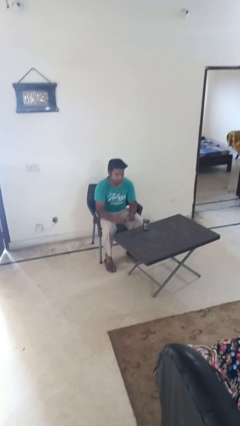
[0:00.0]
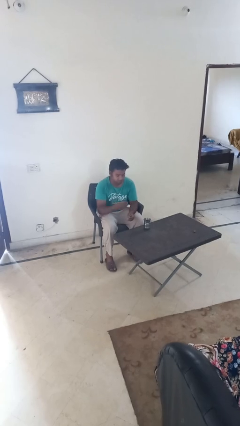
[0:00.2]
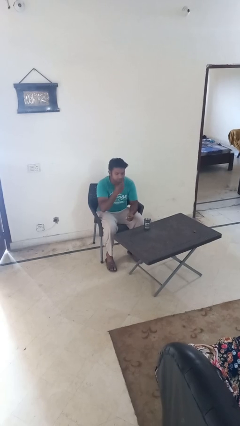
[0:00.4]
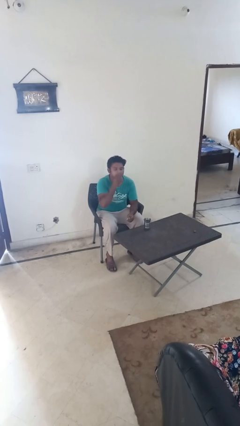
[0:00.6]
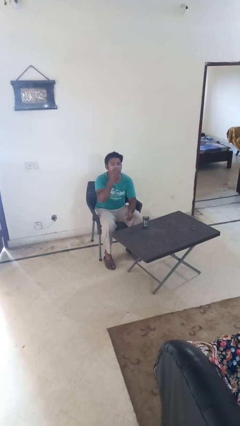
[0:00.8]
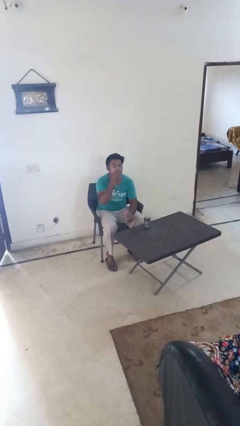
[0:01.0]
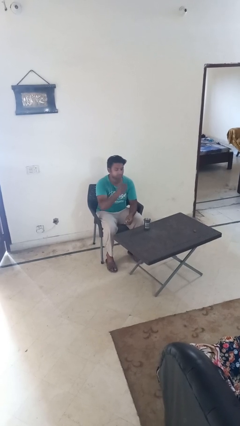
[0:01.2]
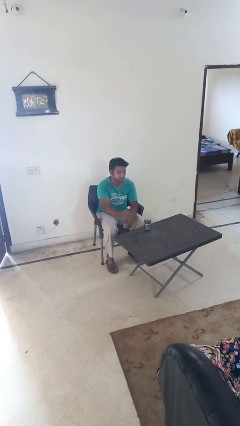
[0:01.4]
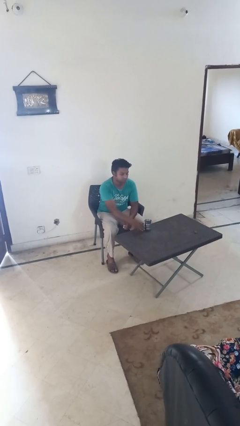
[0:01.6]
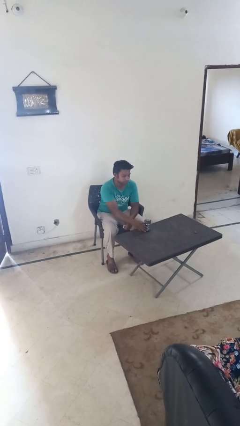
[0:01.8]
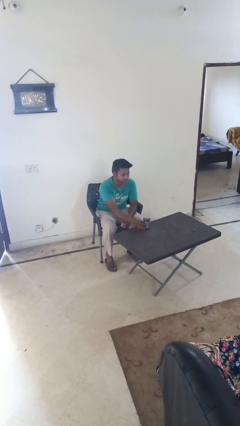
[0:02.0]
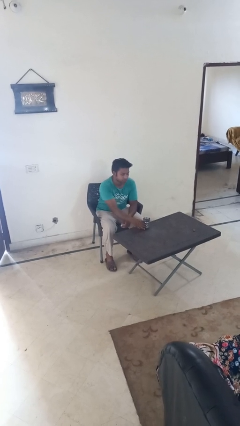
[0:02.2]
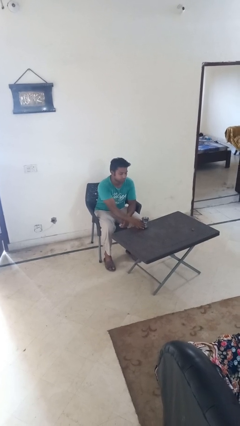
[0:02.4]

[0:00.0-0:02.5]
person takes medicine pills

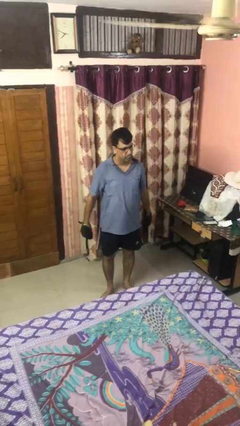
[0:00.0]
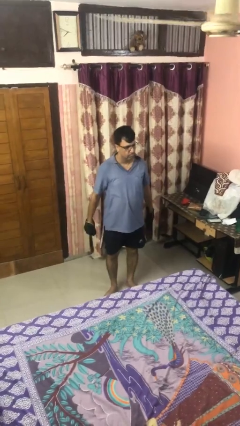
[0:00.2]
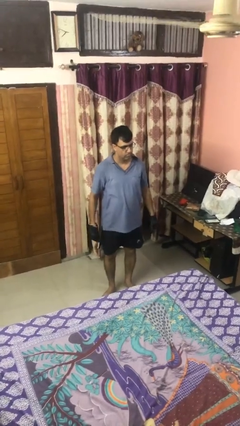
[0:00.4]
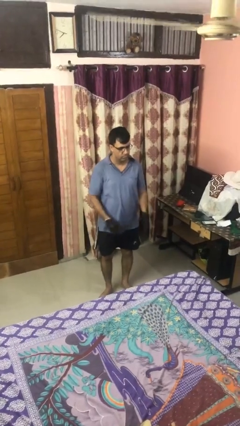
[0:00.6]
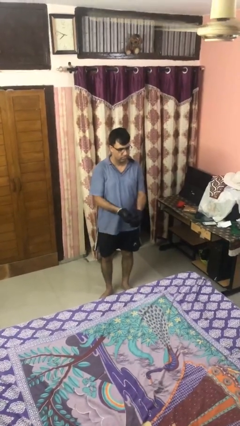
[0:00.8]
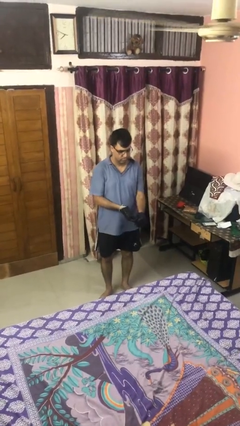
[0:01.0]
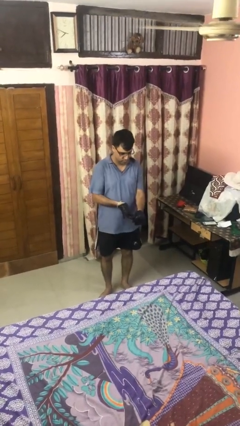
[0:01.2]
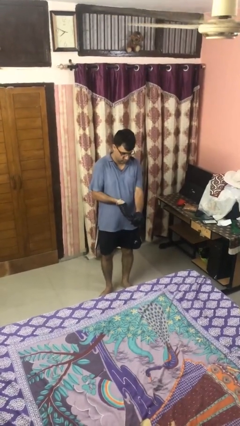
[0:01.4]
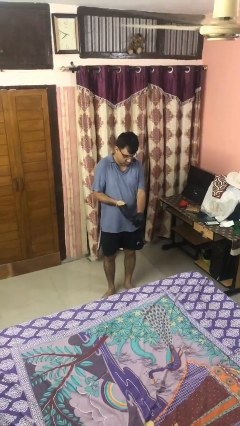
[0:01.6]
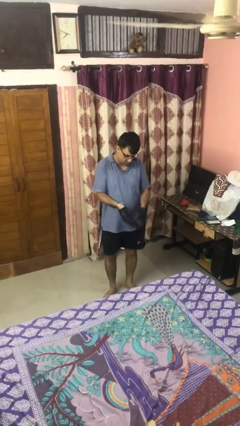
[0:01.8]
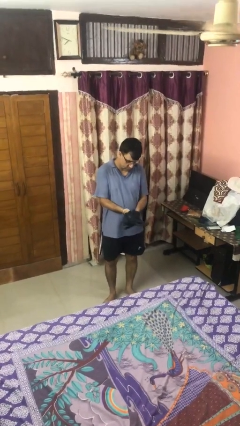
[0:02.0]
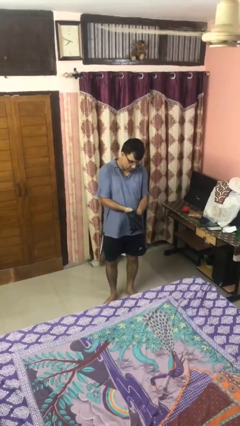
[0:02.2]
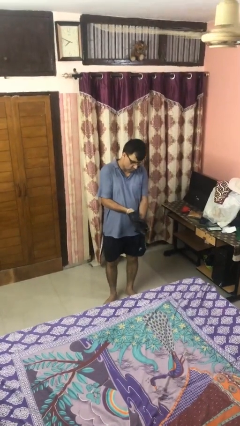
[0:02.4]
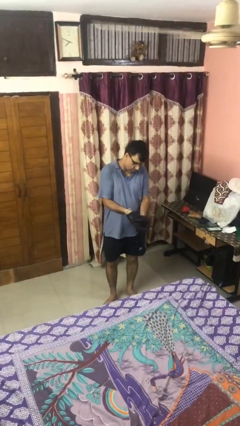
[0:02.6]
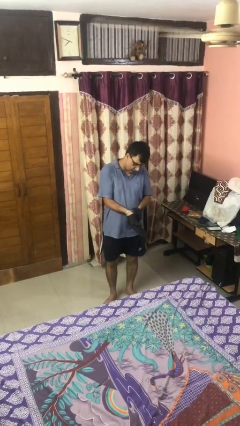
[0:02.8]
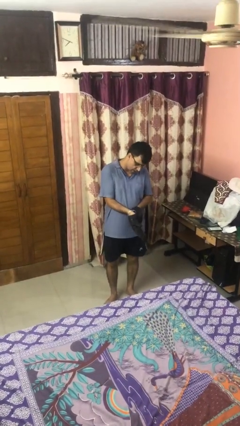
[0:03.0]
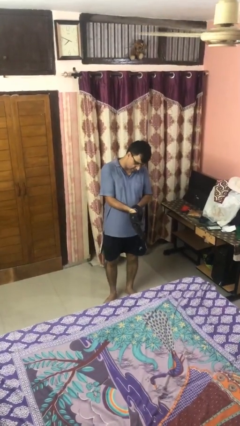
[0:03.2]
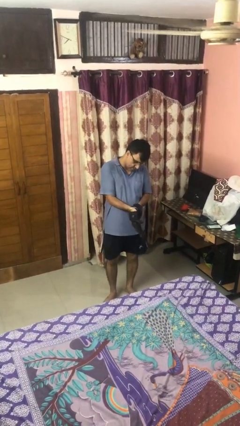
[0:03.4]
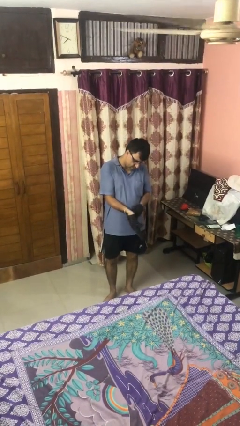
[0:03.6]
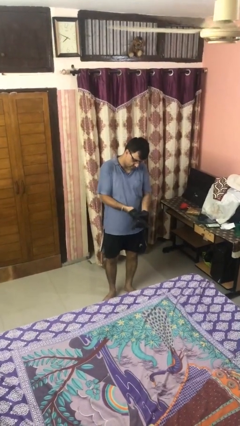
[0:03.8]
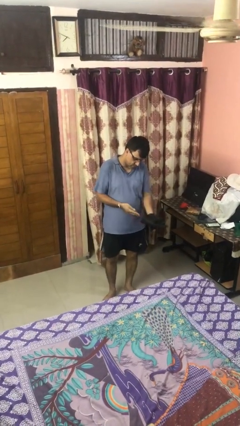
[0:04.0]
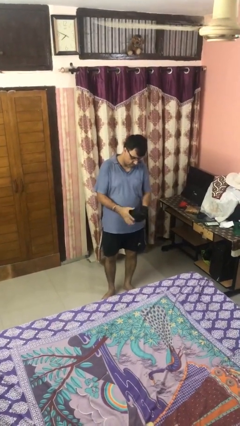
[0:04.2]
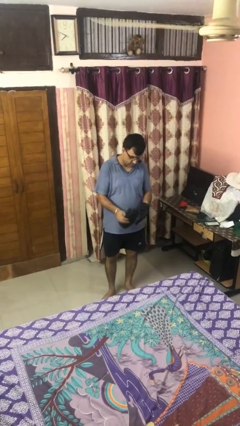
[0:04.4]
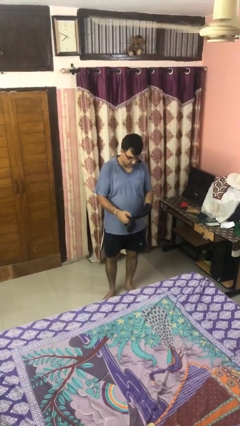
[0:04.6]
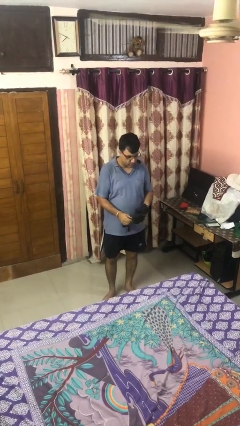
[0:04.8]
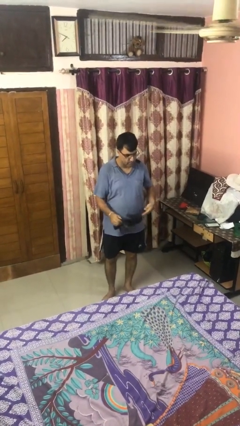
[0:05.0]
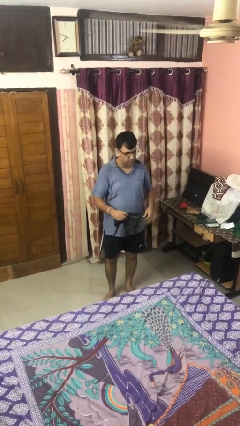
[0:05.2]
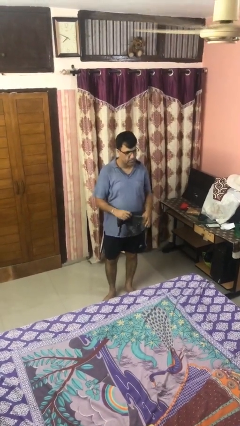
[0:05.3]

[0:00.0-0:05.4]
person takes off gloves

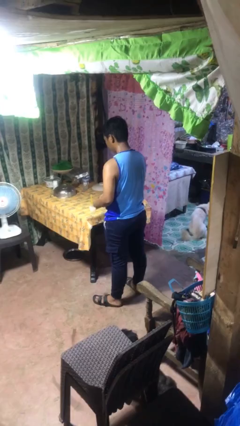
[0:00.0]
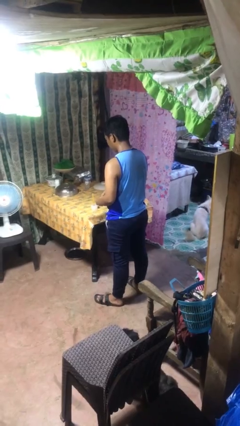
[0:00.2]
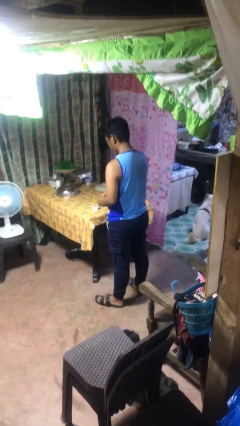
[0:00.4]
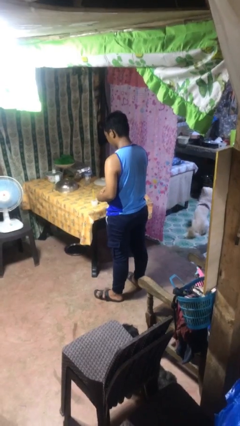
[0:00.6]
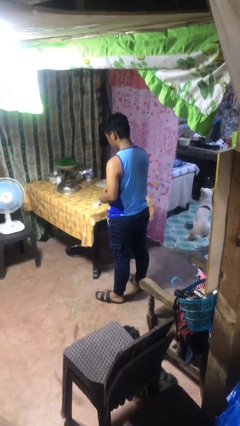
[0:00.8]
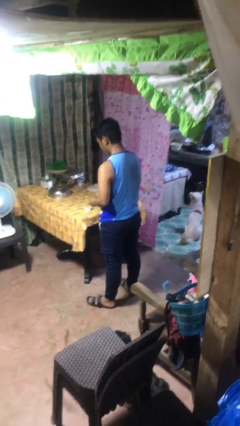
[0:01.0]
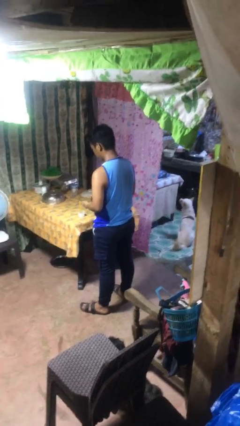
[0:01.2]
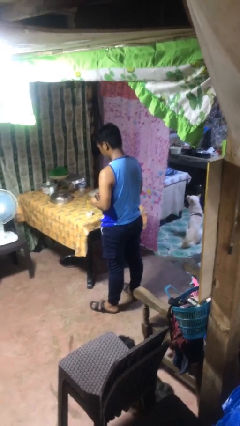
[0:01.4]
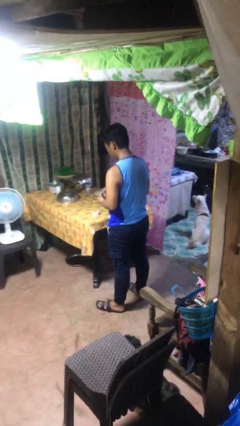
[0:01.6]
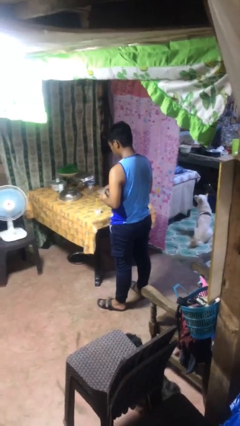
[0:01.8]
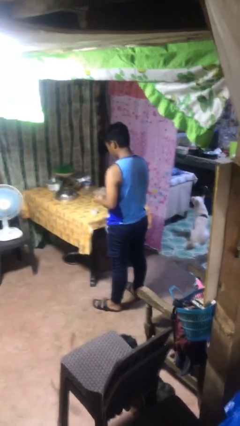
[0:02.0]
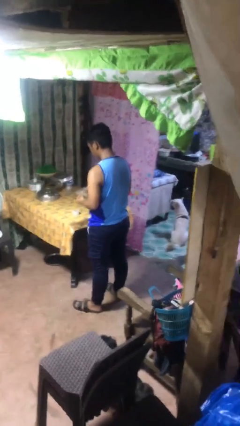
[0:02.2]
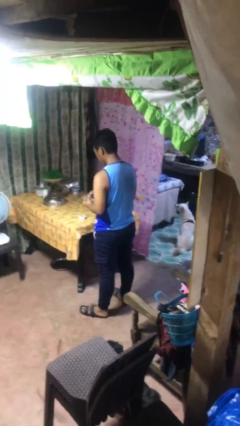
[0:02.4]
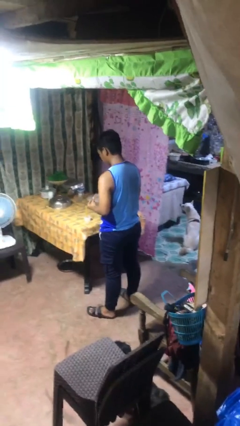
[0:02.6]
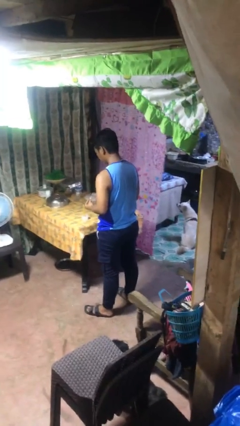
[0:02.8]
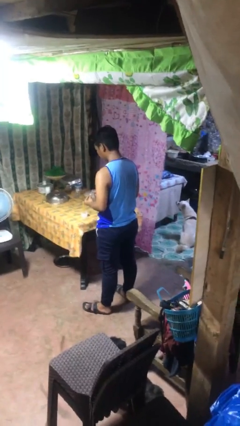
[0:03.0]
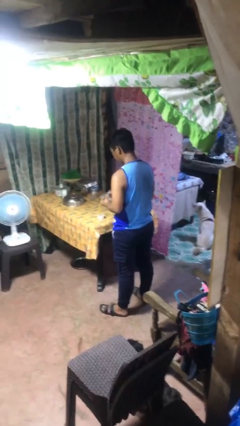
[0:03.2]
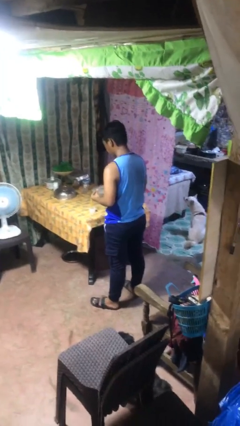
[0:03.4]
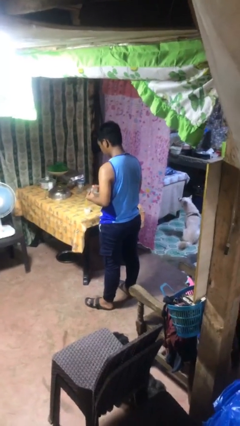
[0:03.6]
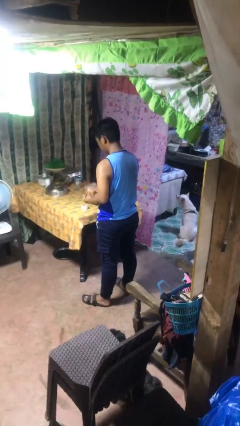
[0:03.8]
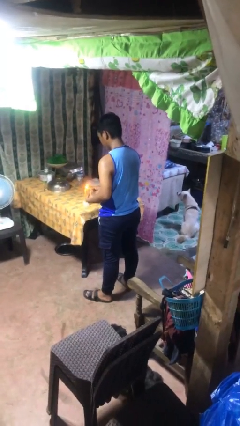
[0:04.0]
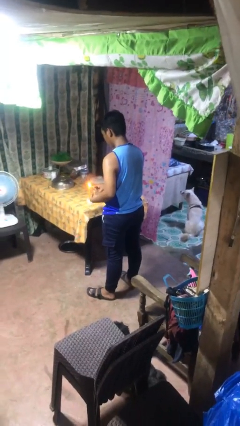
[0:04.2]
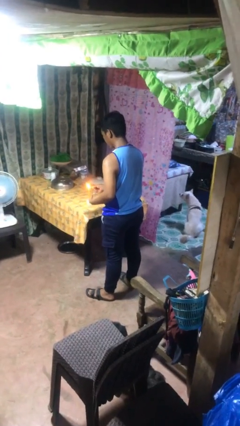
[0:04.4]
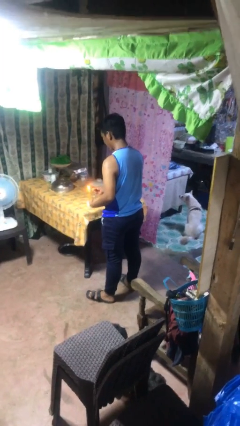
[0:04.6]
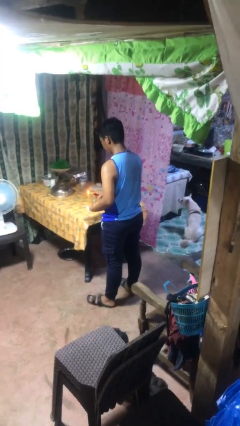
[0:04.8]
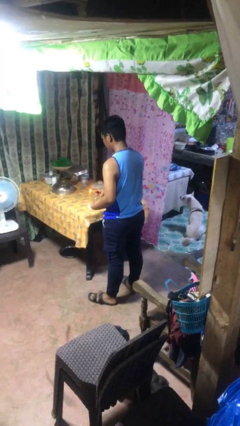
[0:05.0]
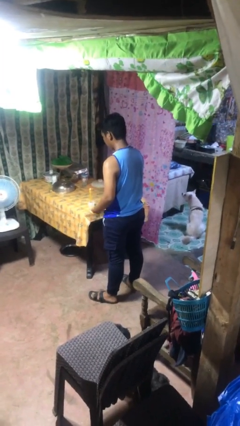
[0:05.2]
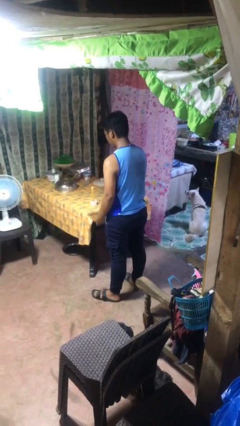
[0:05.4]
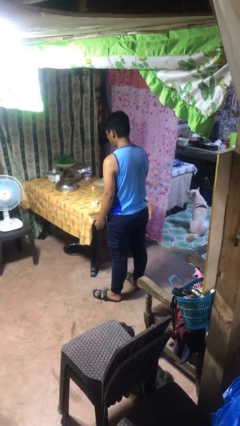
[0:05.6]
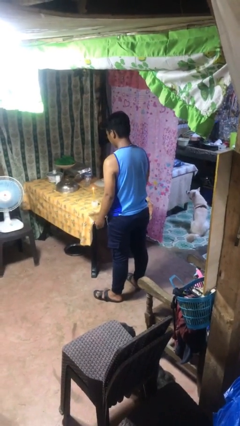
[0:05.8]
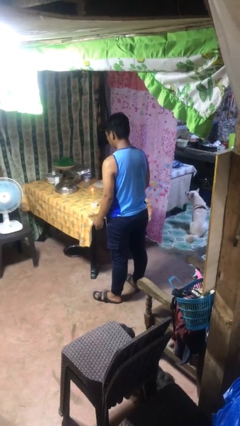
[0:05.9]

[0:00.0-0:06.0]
person lights candle

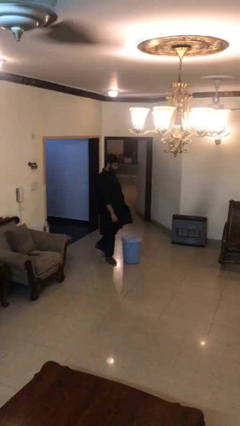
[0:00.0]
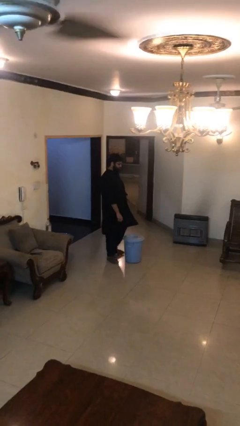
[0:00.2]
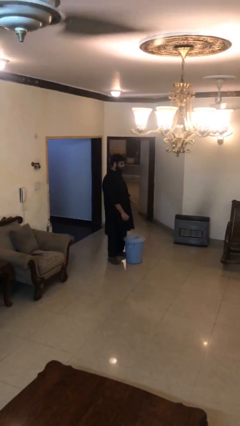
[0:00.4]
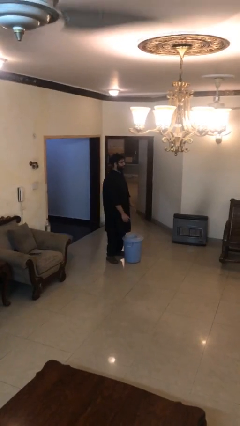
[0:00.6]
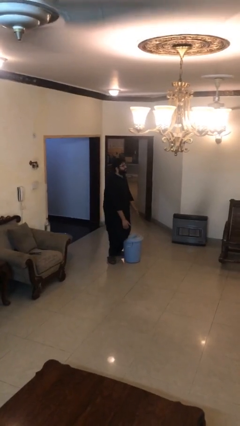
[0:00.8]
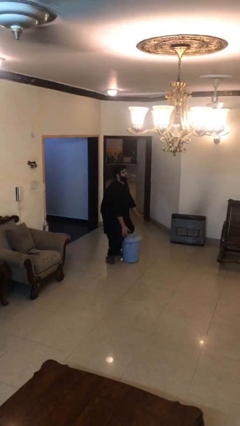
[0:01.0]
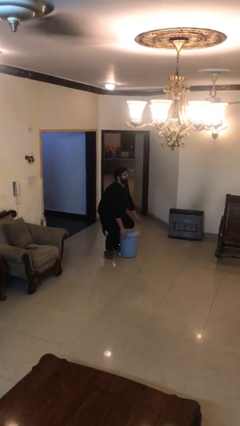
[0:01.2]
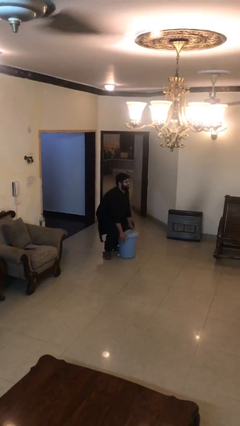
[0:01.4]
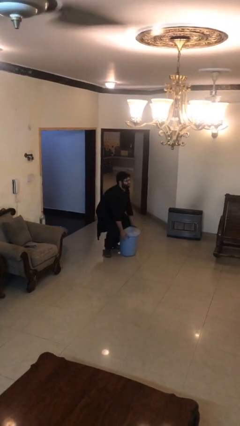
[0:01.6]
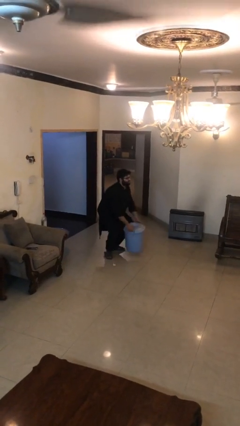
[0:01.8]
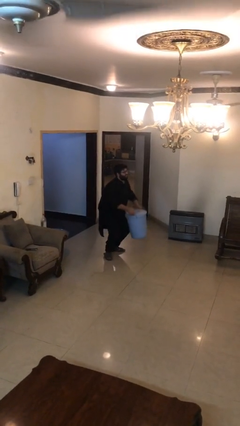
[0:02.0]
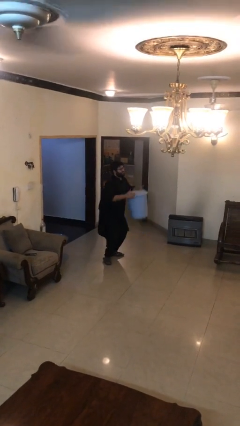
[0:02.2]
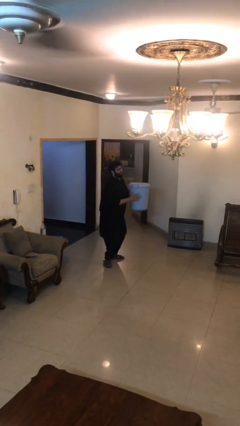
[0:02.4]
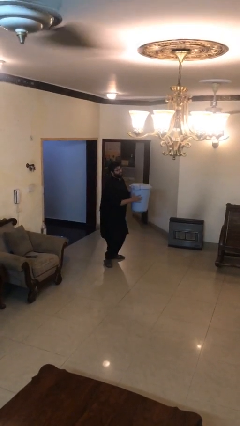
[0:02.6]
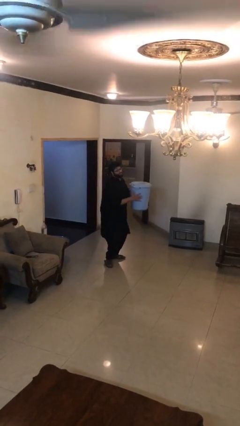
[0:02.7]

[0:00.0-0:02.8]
person picks up object from floor

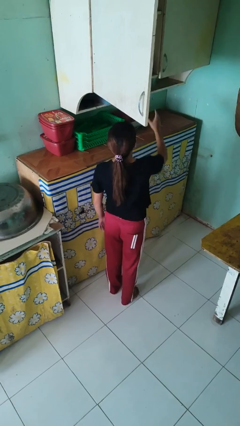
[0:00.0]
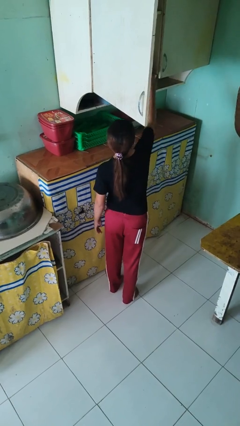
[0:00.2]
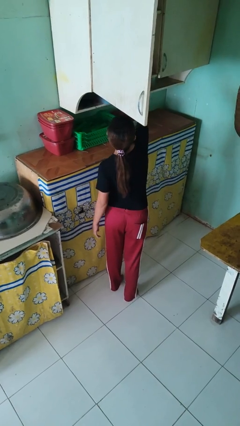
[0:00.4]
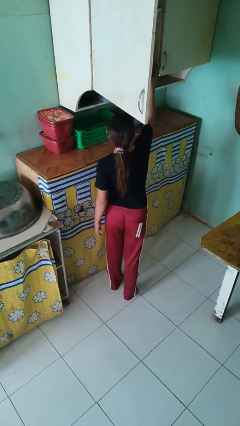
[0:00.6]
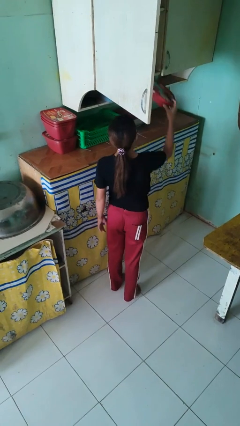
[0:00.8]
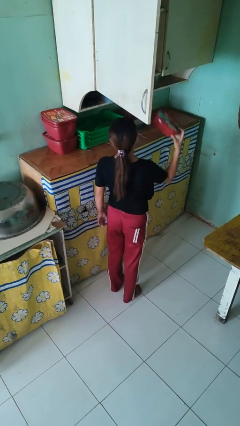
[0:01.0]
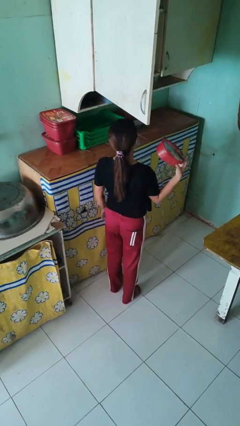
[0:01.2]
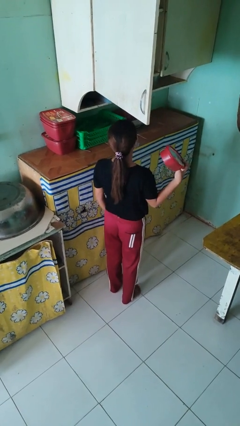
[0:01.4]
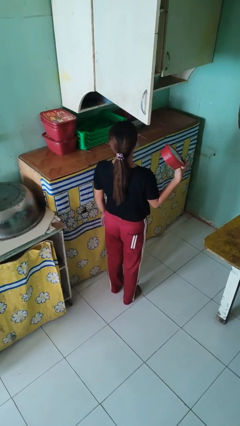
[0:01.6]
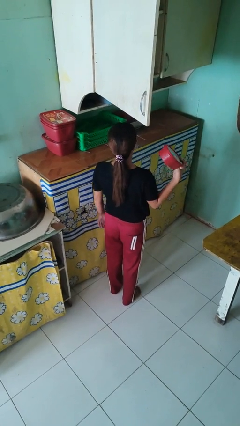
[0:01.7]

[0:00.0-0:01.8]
person takes object from cabinet
